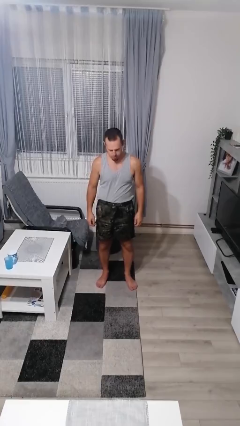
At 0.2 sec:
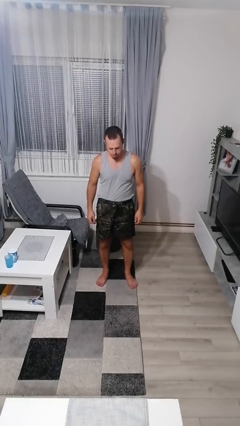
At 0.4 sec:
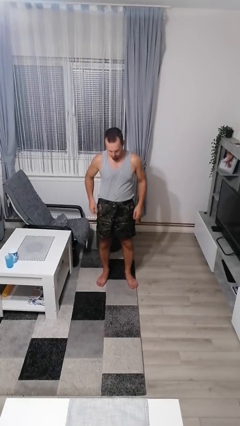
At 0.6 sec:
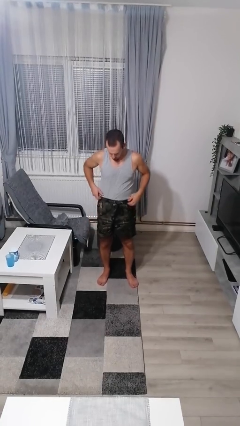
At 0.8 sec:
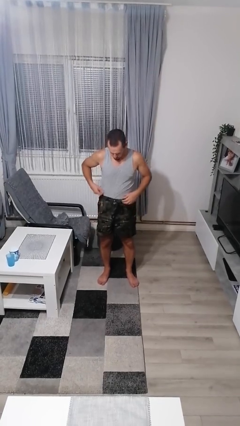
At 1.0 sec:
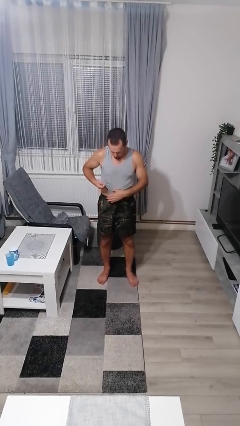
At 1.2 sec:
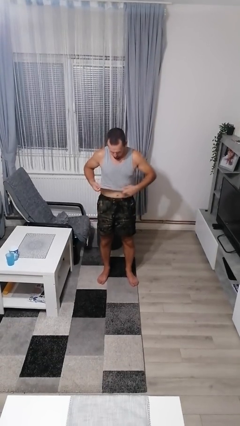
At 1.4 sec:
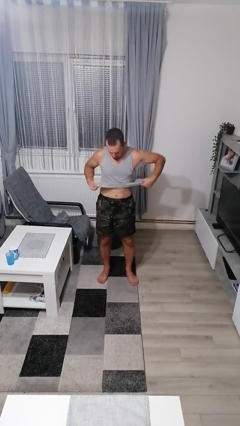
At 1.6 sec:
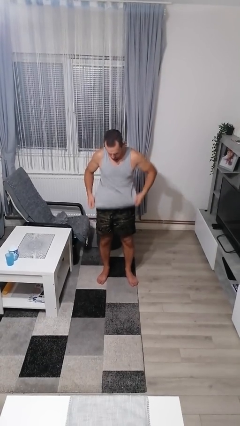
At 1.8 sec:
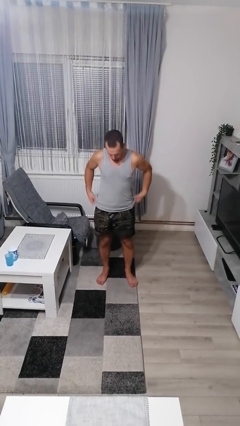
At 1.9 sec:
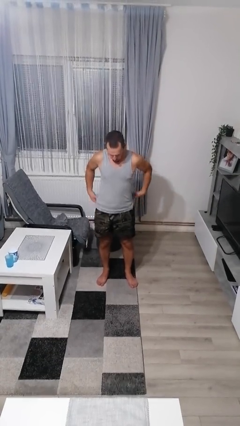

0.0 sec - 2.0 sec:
person untucks shirt

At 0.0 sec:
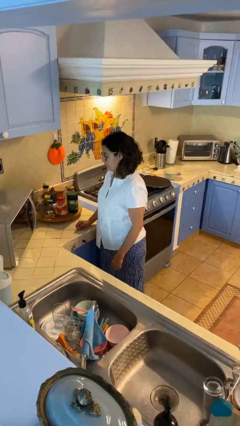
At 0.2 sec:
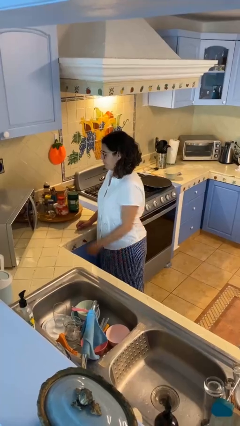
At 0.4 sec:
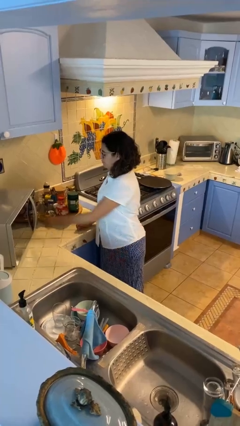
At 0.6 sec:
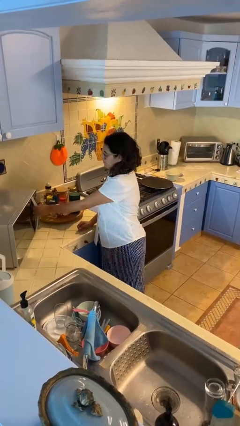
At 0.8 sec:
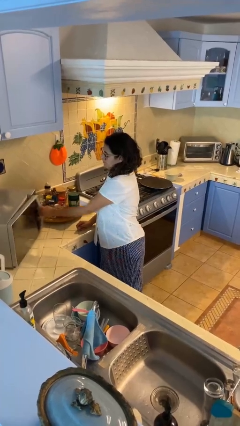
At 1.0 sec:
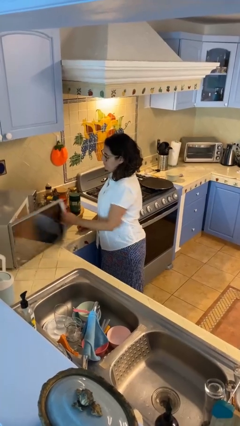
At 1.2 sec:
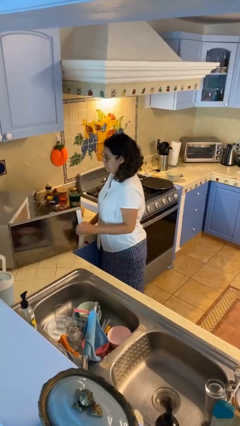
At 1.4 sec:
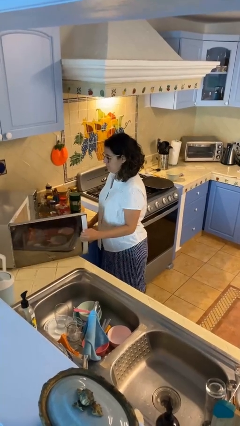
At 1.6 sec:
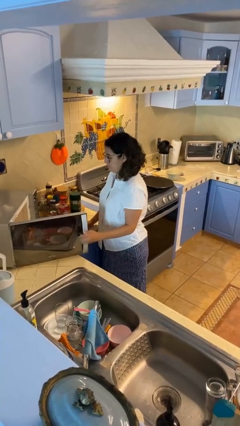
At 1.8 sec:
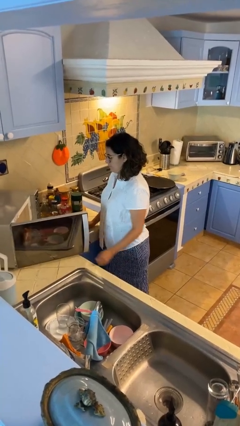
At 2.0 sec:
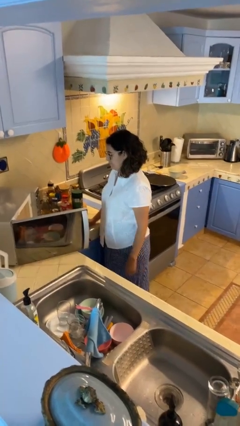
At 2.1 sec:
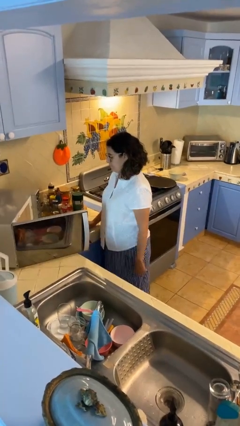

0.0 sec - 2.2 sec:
person opens microwave

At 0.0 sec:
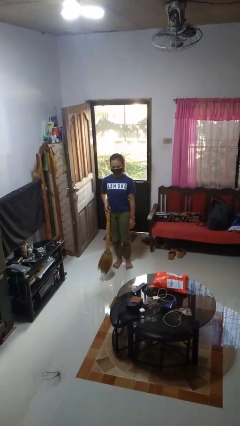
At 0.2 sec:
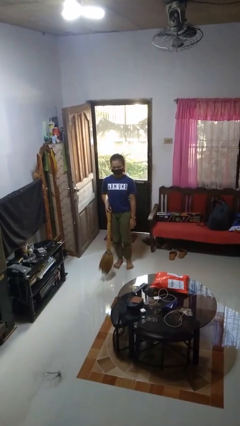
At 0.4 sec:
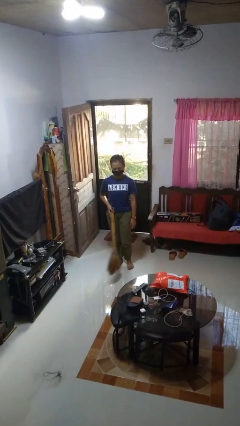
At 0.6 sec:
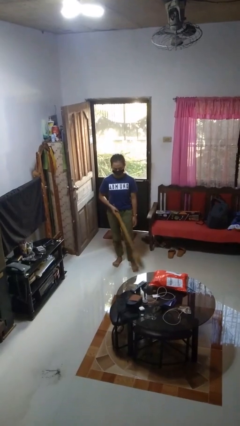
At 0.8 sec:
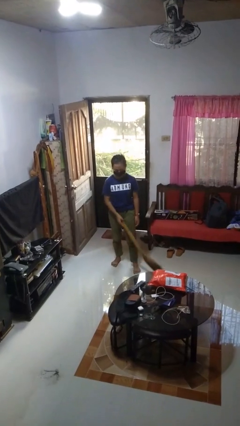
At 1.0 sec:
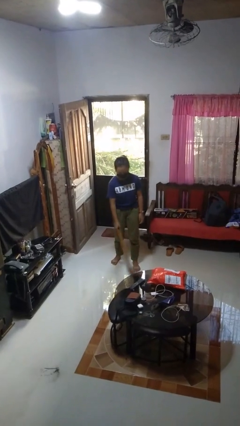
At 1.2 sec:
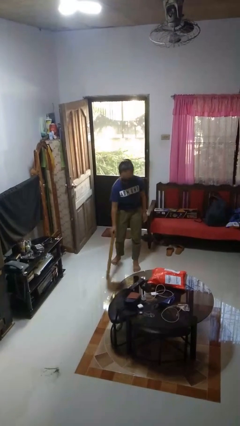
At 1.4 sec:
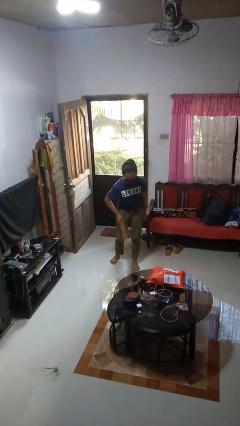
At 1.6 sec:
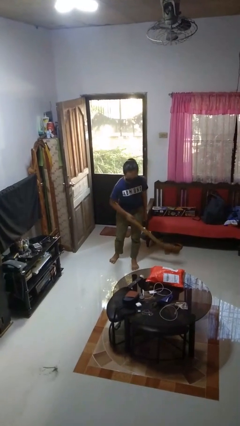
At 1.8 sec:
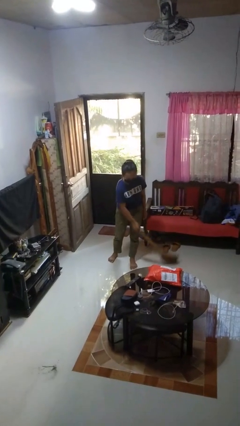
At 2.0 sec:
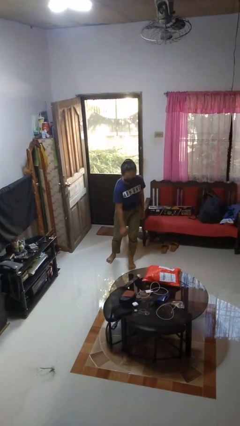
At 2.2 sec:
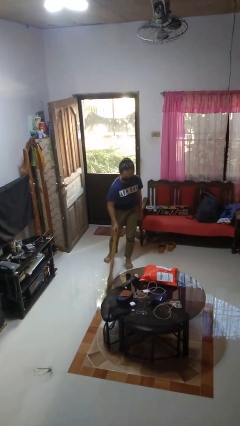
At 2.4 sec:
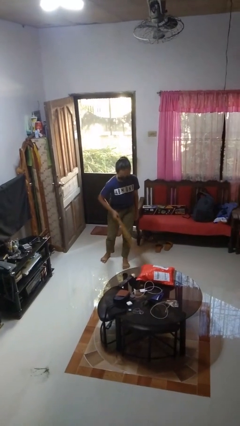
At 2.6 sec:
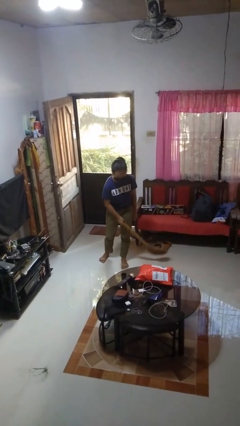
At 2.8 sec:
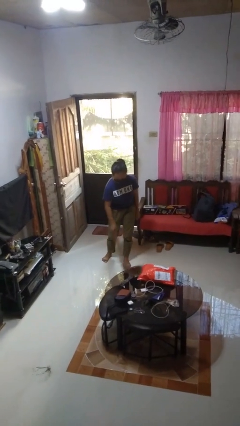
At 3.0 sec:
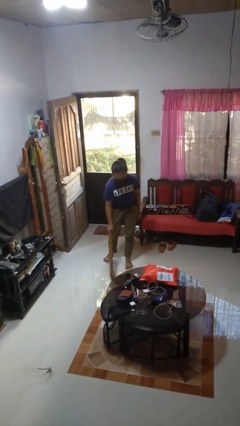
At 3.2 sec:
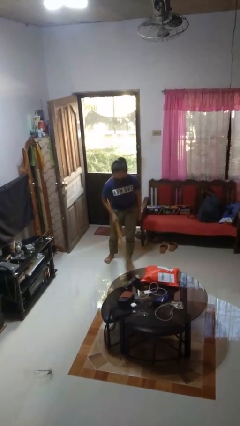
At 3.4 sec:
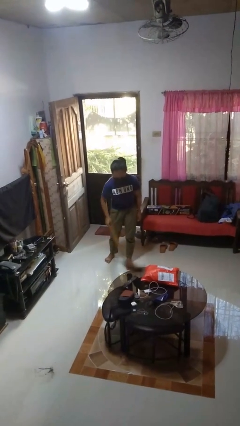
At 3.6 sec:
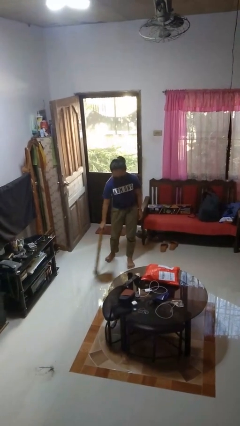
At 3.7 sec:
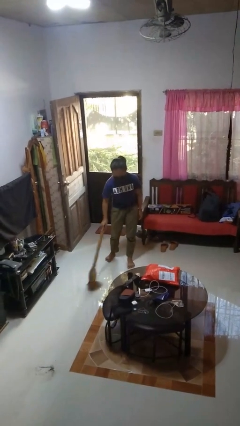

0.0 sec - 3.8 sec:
person sweeps floor

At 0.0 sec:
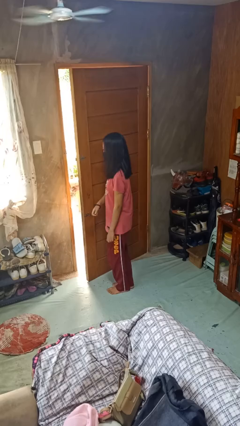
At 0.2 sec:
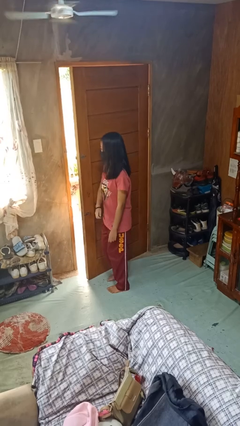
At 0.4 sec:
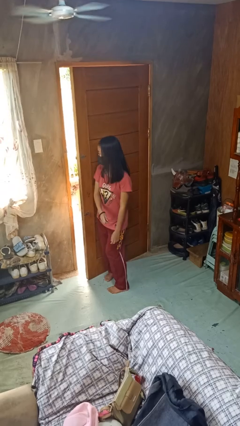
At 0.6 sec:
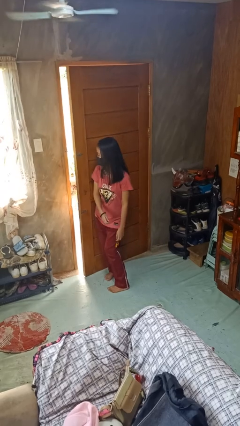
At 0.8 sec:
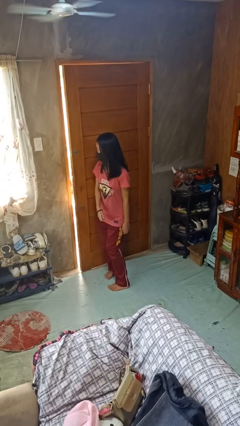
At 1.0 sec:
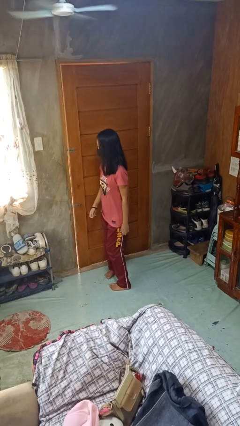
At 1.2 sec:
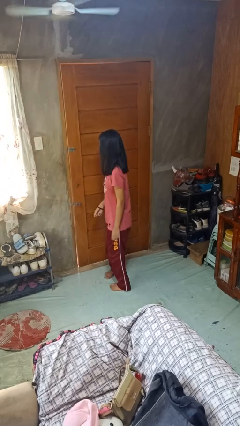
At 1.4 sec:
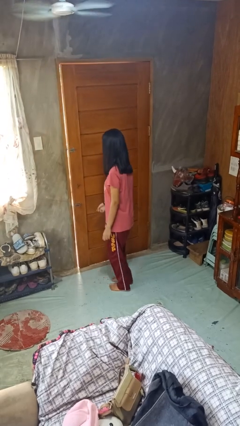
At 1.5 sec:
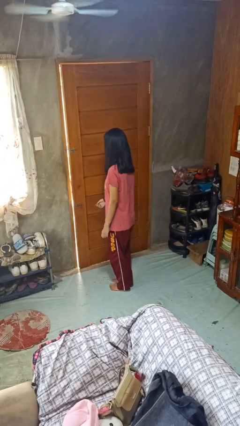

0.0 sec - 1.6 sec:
person closes door with hip

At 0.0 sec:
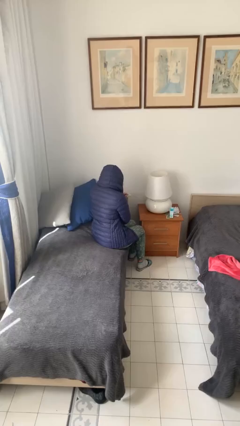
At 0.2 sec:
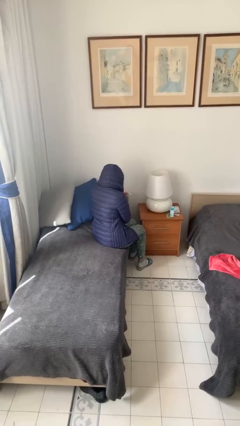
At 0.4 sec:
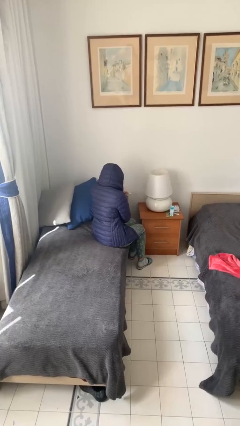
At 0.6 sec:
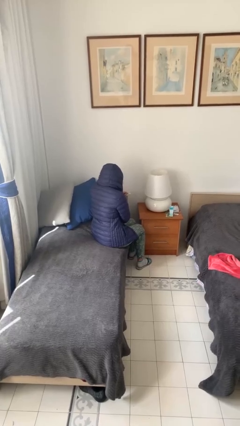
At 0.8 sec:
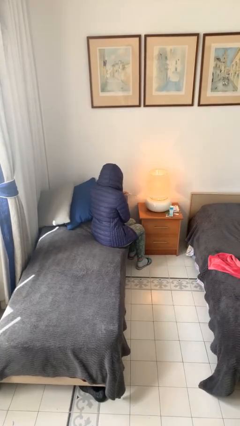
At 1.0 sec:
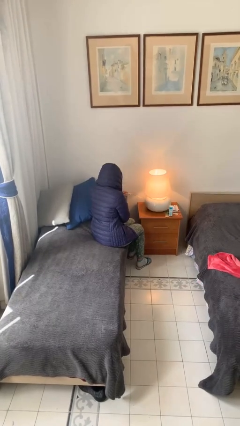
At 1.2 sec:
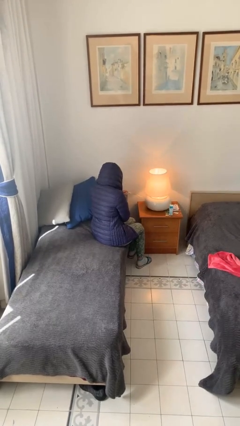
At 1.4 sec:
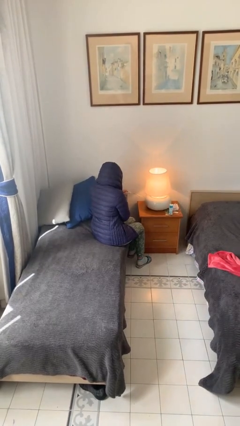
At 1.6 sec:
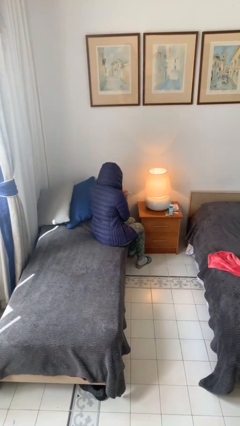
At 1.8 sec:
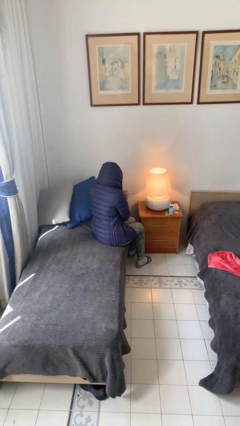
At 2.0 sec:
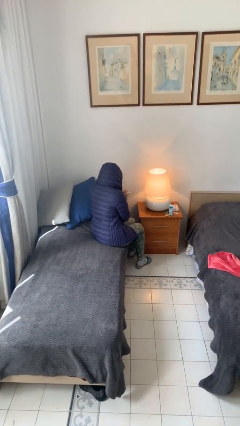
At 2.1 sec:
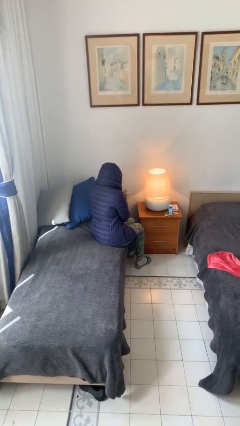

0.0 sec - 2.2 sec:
person turns on lamp

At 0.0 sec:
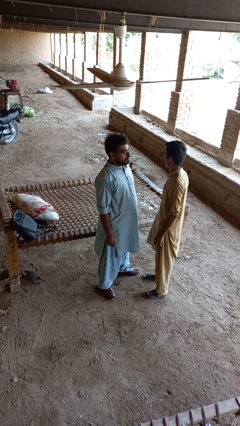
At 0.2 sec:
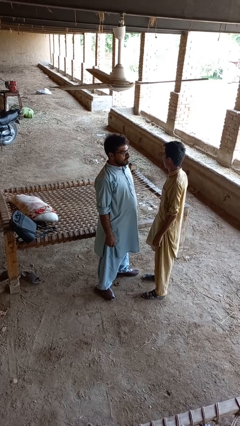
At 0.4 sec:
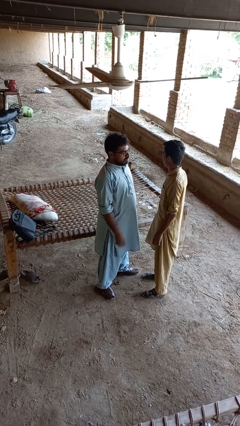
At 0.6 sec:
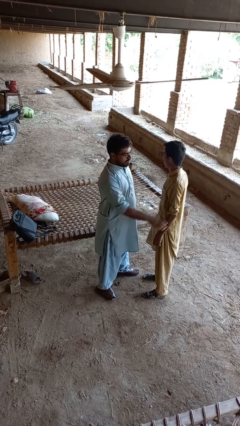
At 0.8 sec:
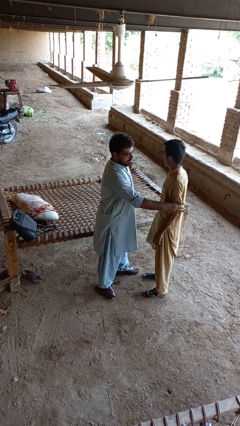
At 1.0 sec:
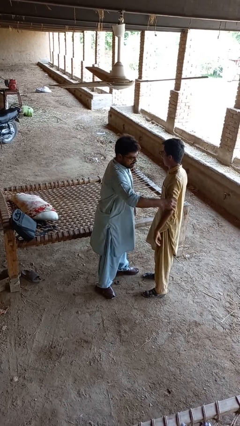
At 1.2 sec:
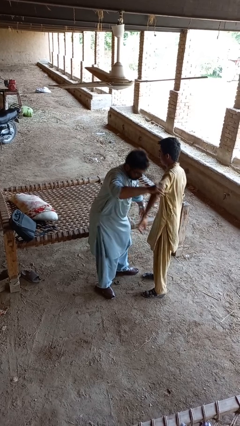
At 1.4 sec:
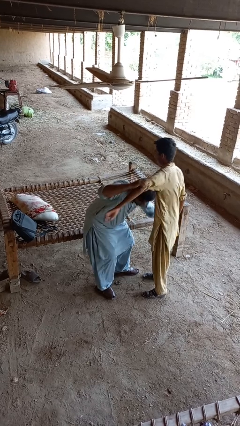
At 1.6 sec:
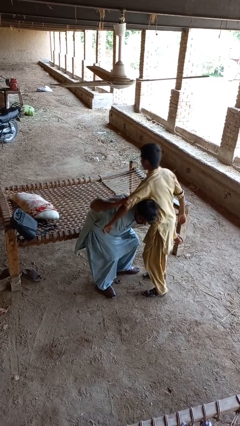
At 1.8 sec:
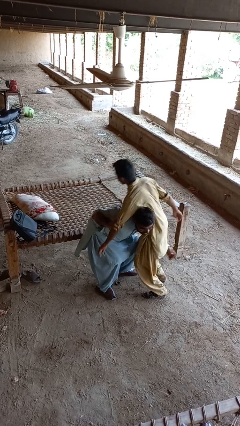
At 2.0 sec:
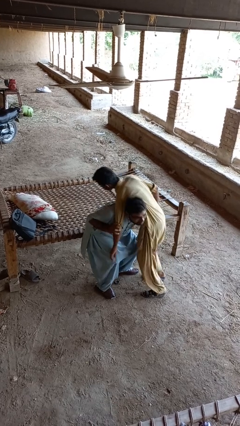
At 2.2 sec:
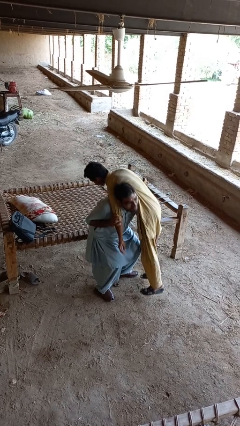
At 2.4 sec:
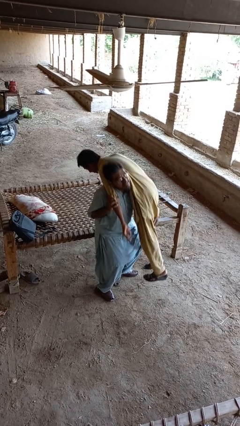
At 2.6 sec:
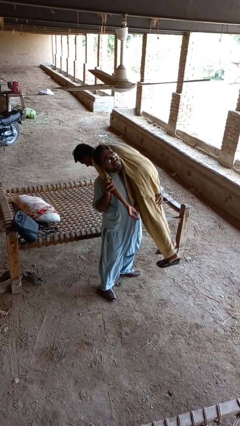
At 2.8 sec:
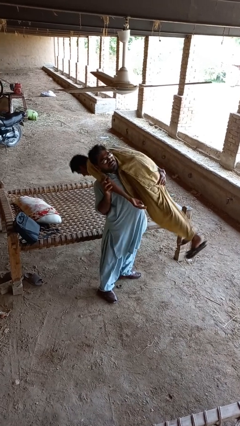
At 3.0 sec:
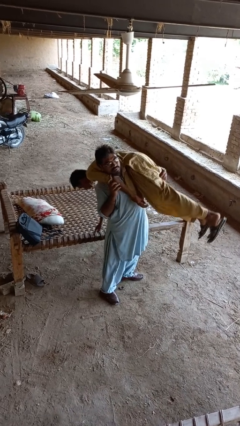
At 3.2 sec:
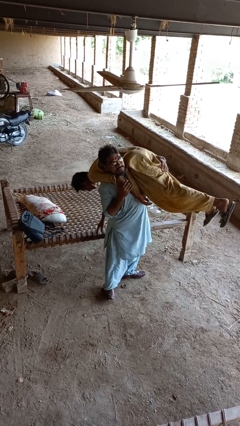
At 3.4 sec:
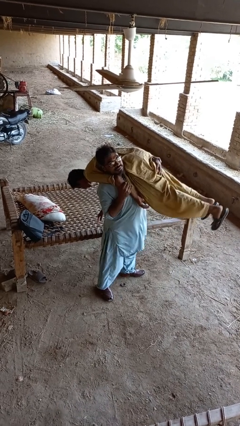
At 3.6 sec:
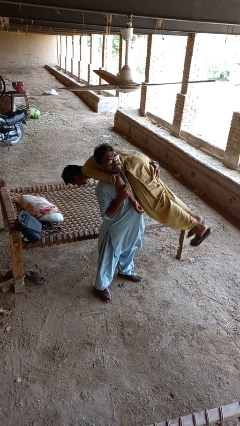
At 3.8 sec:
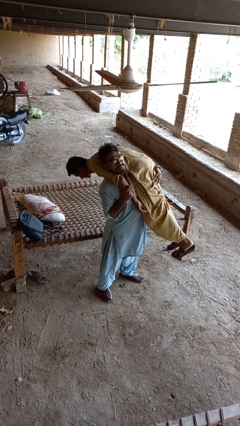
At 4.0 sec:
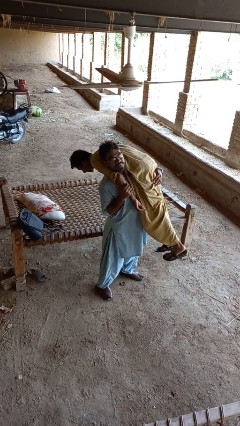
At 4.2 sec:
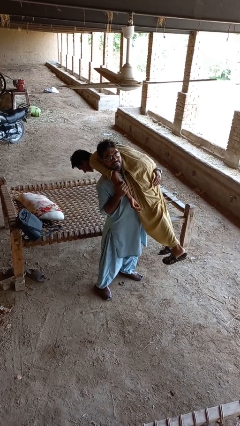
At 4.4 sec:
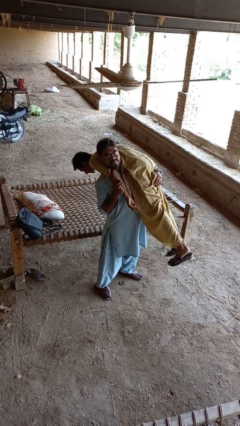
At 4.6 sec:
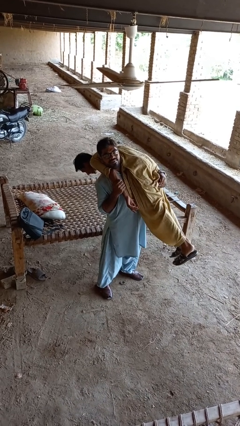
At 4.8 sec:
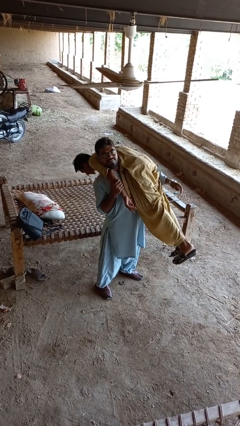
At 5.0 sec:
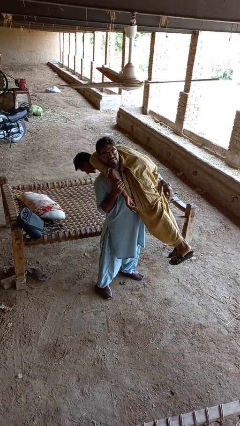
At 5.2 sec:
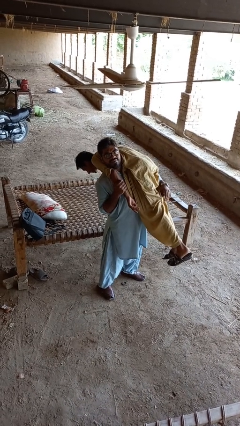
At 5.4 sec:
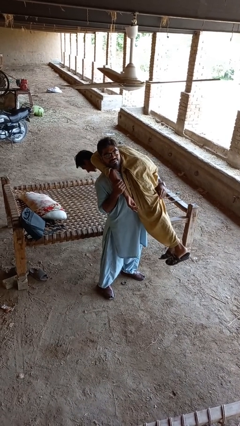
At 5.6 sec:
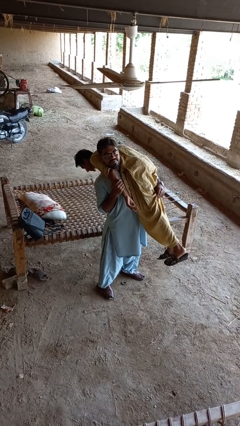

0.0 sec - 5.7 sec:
person carries person over shoulder
